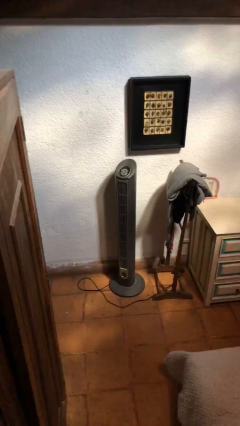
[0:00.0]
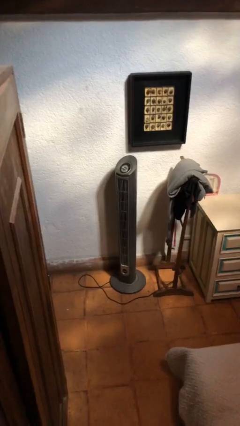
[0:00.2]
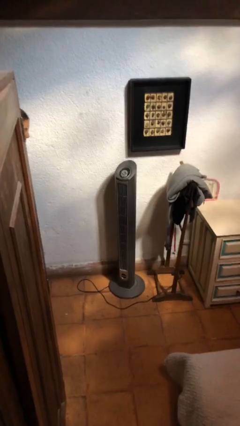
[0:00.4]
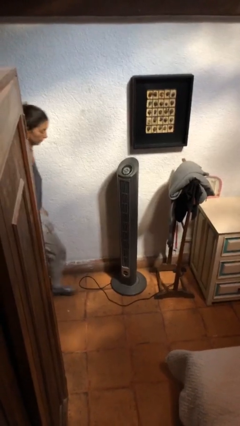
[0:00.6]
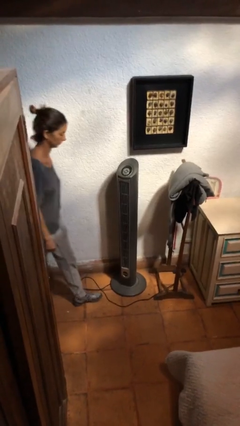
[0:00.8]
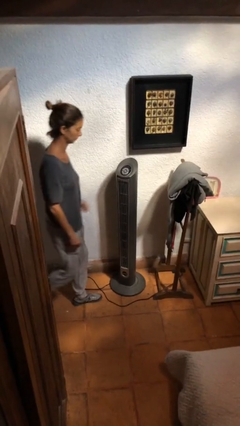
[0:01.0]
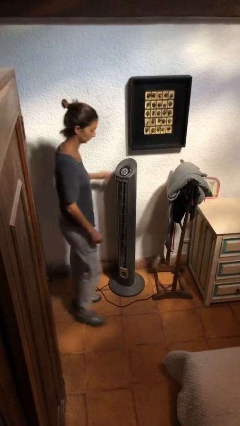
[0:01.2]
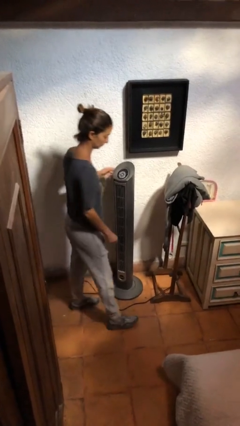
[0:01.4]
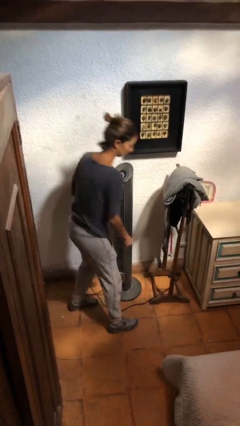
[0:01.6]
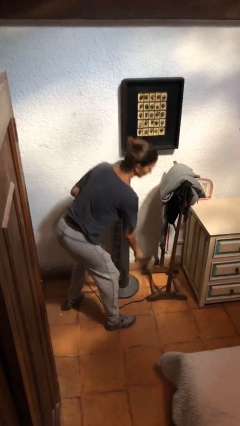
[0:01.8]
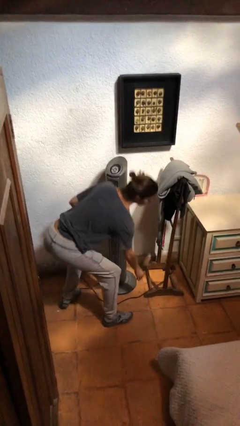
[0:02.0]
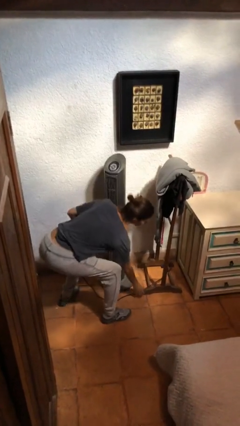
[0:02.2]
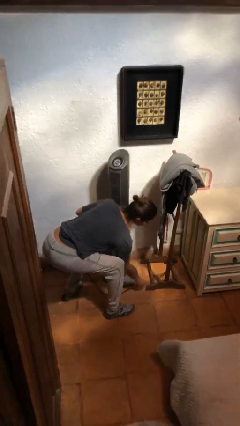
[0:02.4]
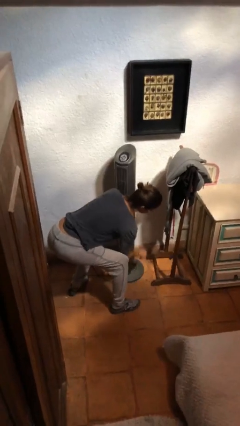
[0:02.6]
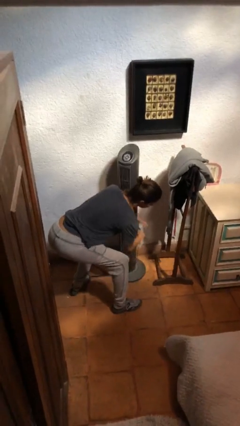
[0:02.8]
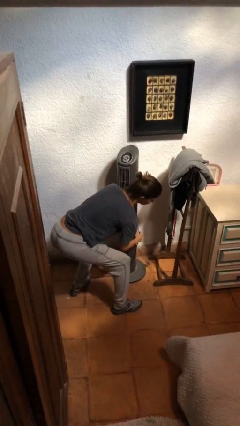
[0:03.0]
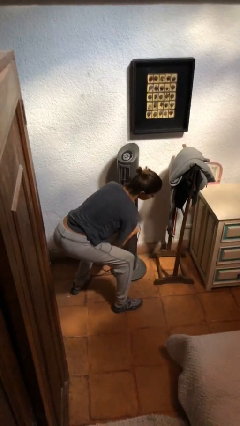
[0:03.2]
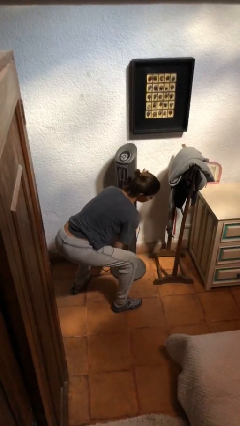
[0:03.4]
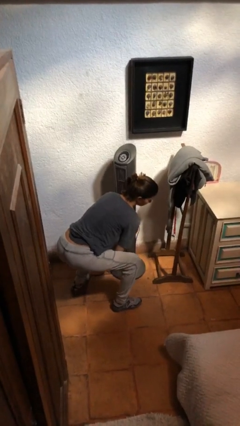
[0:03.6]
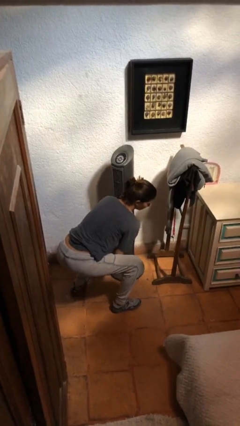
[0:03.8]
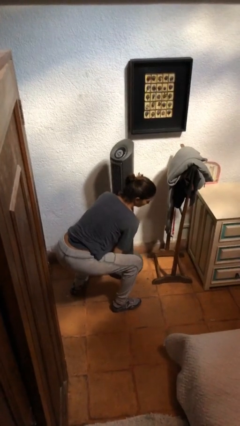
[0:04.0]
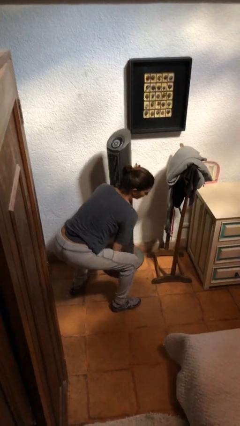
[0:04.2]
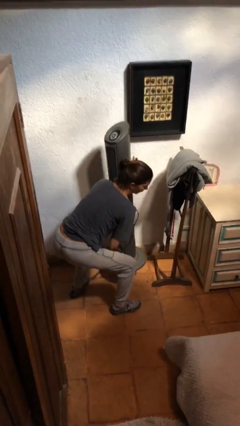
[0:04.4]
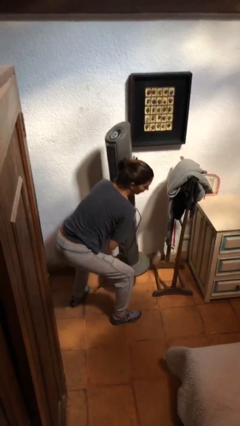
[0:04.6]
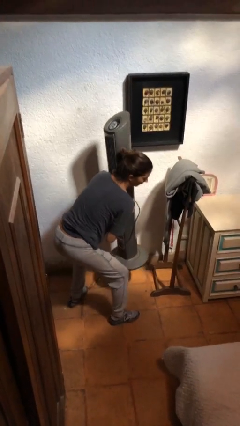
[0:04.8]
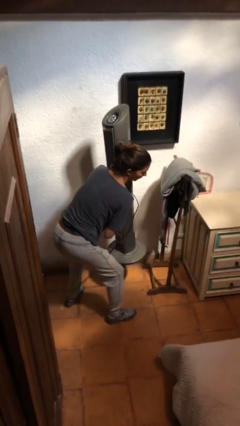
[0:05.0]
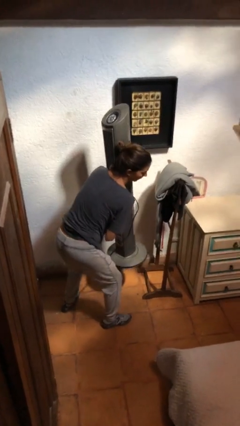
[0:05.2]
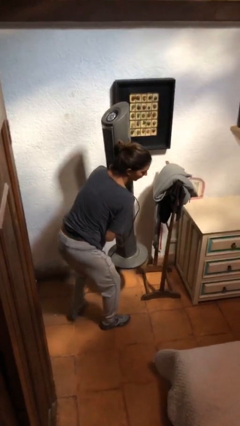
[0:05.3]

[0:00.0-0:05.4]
person picks up object from floor

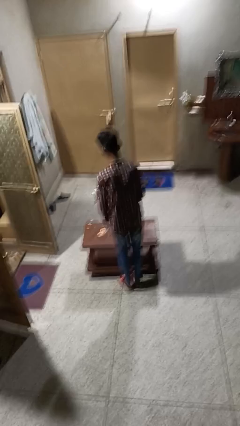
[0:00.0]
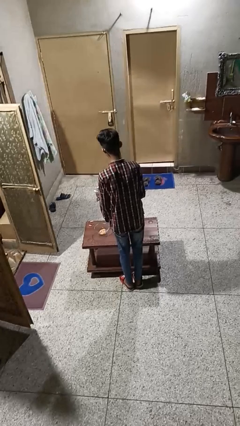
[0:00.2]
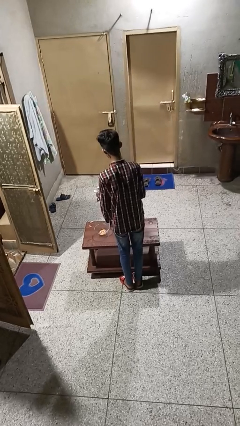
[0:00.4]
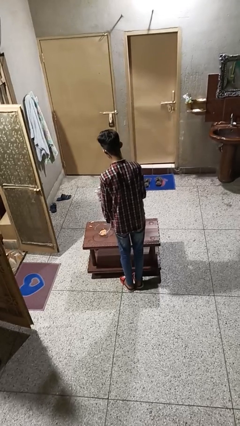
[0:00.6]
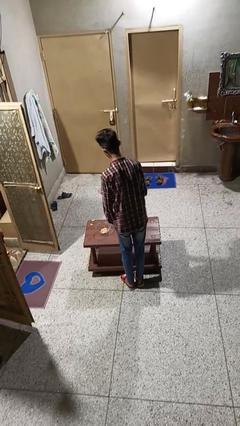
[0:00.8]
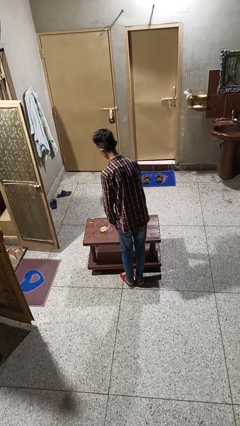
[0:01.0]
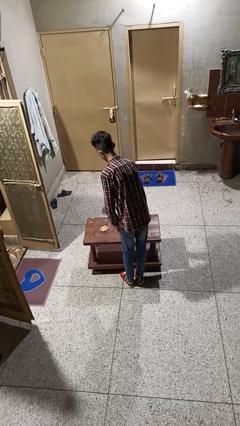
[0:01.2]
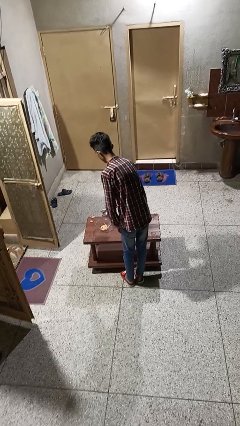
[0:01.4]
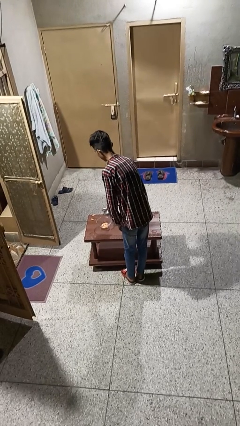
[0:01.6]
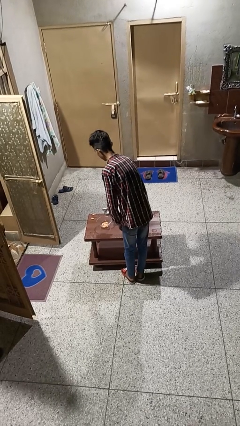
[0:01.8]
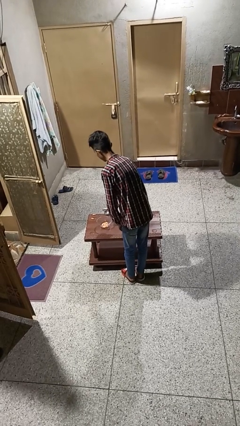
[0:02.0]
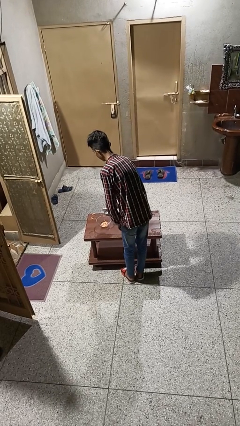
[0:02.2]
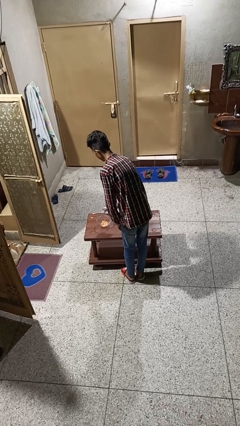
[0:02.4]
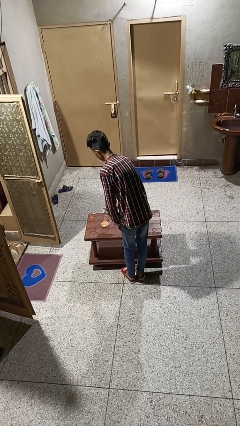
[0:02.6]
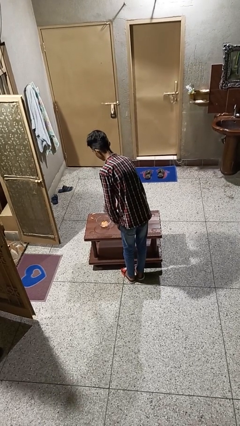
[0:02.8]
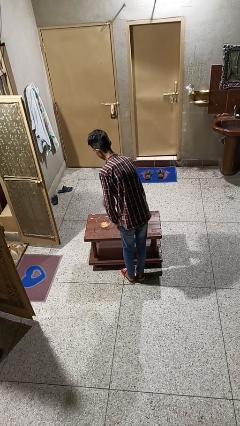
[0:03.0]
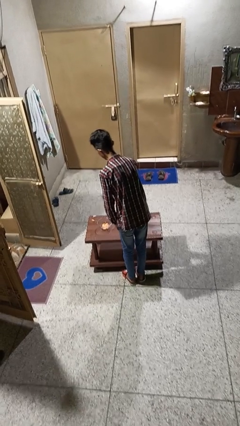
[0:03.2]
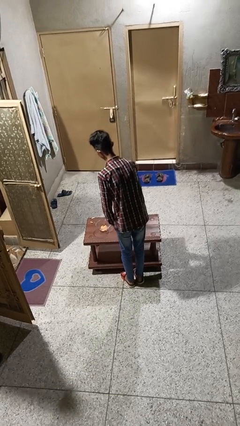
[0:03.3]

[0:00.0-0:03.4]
person pours into bowl

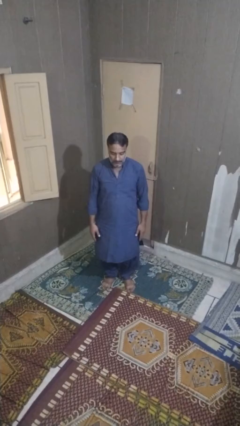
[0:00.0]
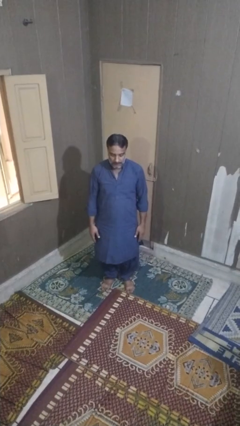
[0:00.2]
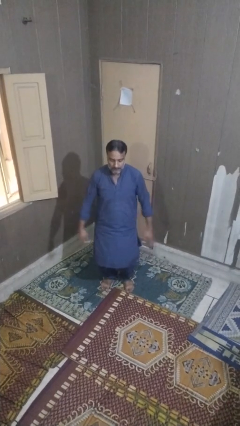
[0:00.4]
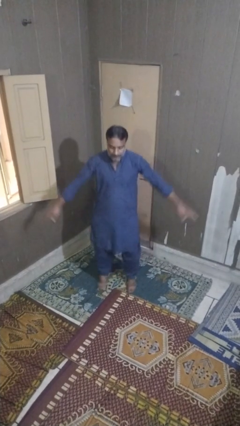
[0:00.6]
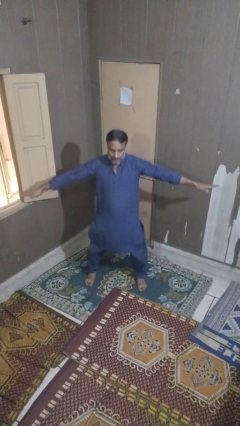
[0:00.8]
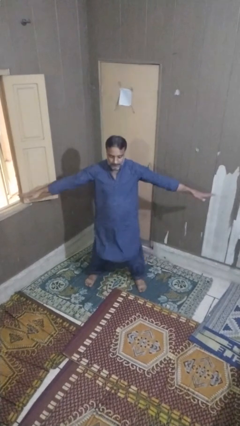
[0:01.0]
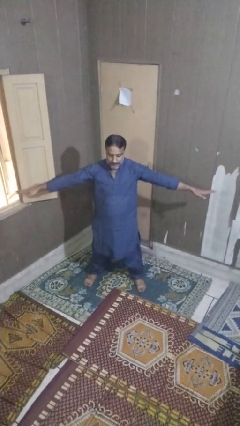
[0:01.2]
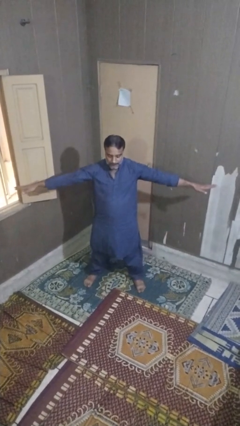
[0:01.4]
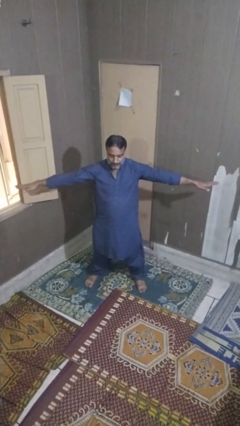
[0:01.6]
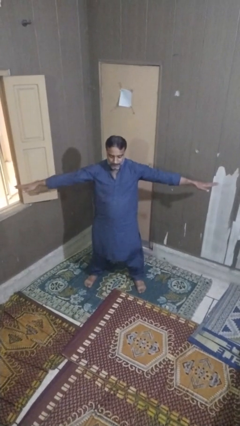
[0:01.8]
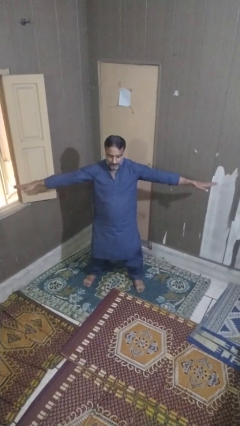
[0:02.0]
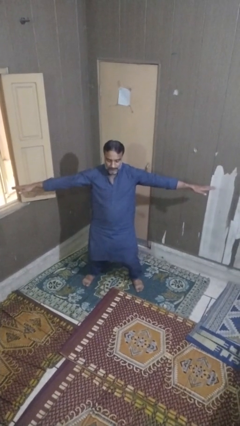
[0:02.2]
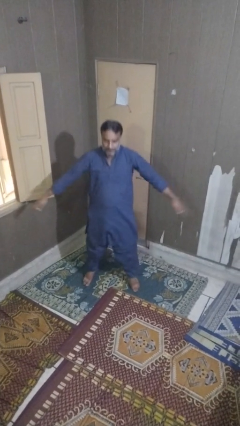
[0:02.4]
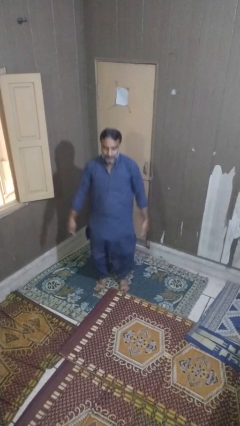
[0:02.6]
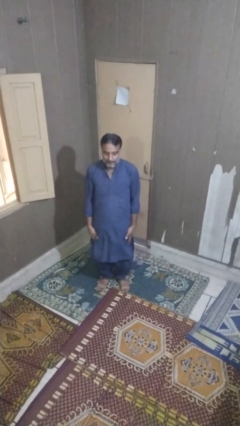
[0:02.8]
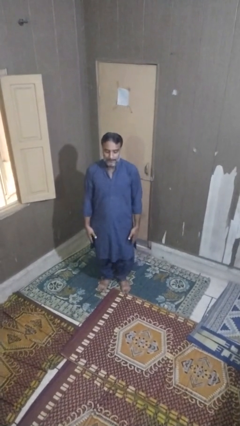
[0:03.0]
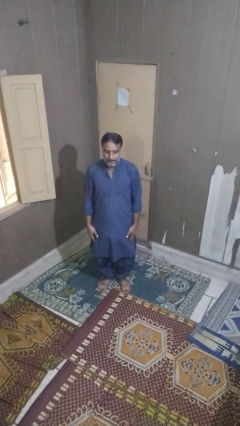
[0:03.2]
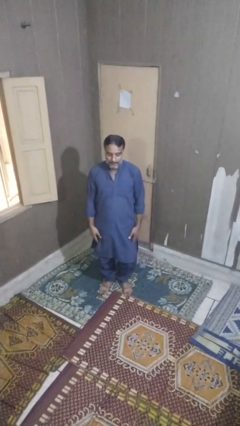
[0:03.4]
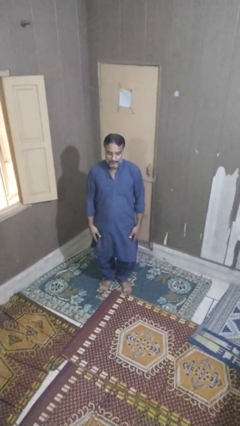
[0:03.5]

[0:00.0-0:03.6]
person exercises with jumping jacks

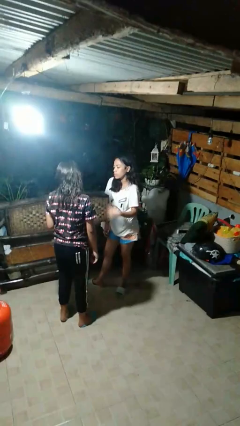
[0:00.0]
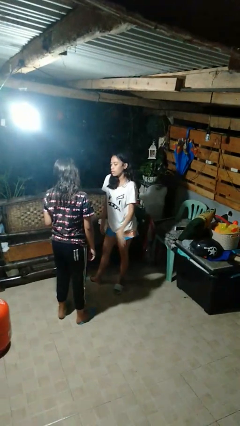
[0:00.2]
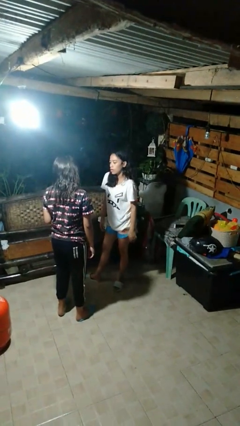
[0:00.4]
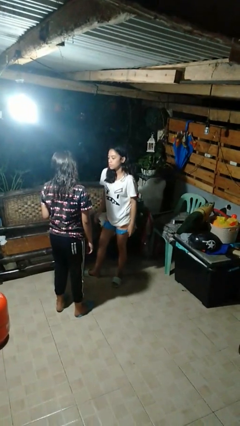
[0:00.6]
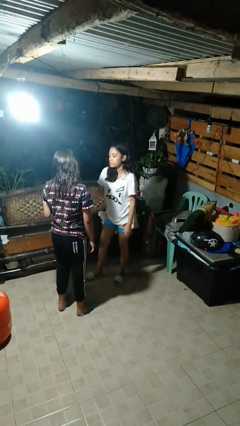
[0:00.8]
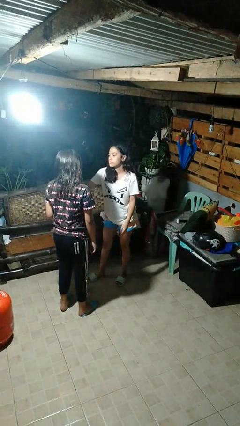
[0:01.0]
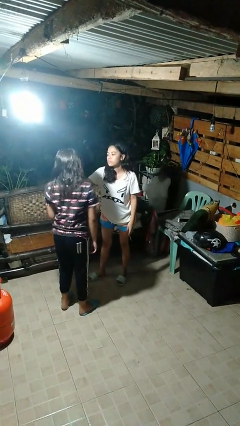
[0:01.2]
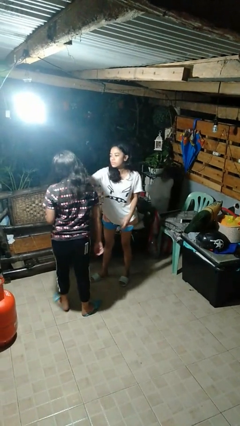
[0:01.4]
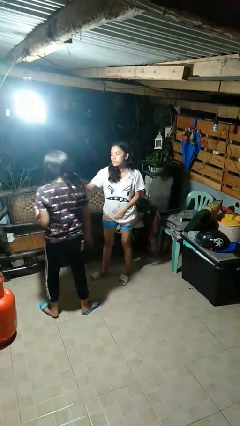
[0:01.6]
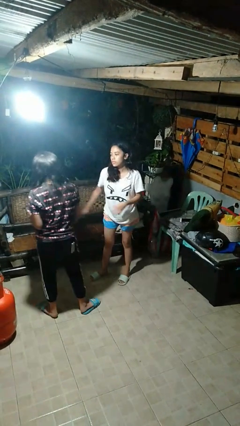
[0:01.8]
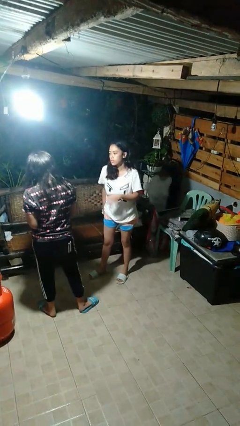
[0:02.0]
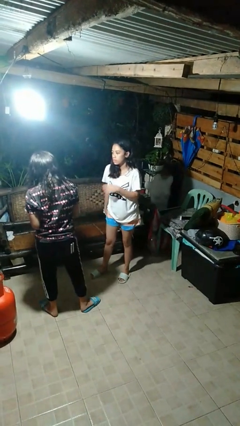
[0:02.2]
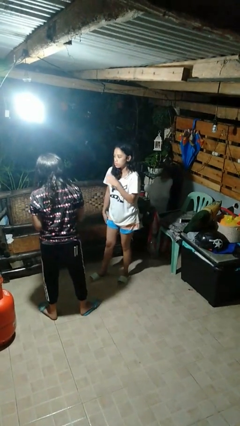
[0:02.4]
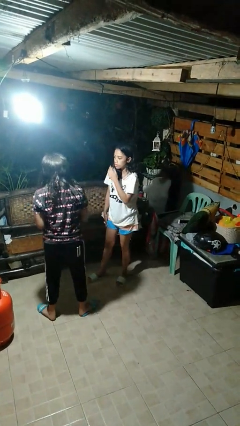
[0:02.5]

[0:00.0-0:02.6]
person shoves person

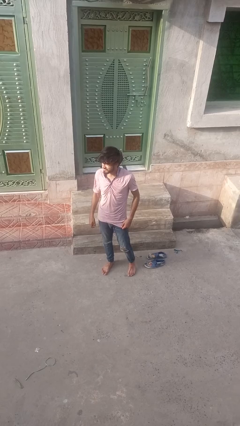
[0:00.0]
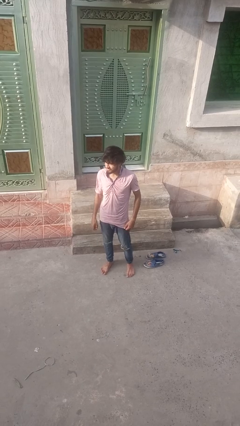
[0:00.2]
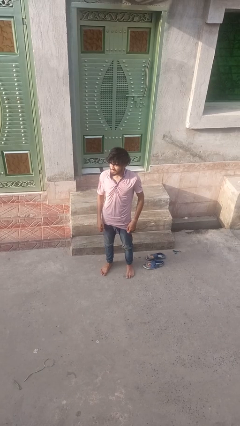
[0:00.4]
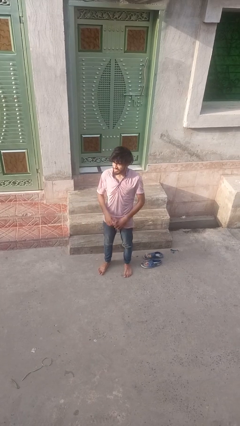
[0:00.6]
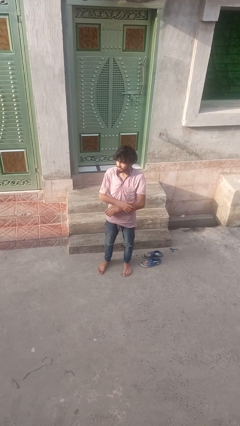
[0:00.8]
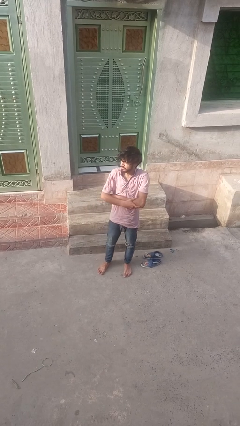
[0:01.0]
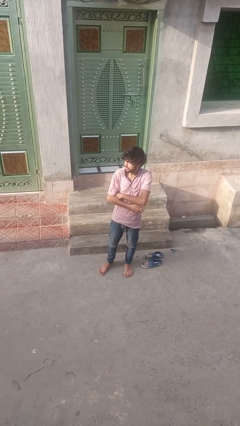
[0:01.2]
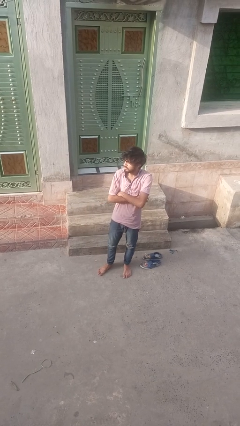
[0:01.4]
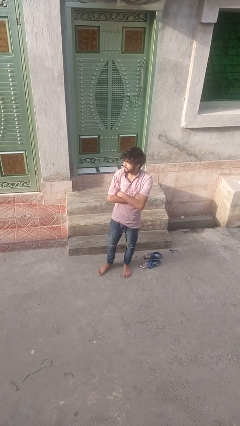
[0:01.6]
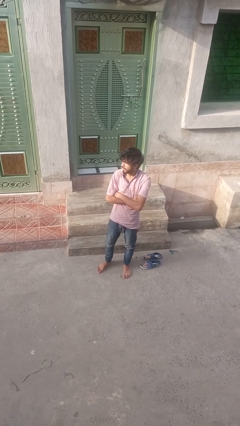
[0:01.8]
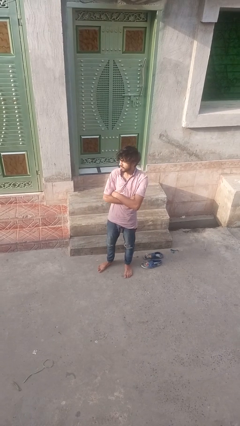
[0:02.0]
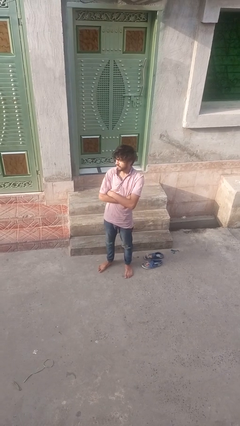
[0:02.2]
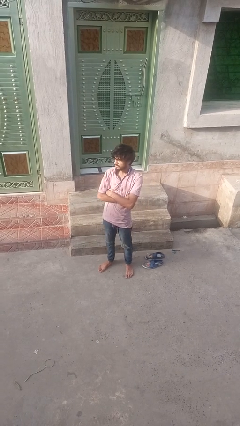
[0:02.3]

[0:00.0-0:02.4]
person crosses arms

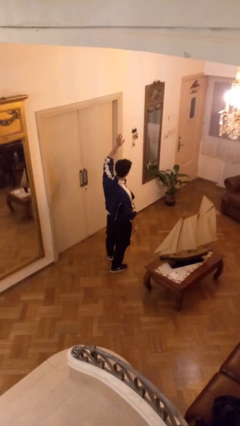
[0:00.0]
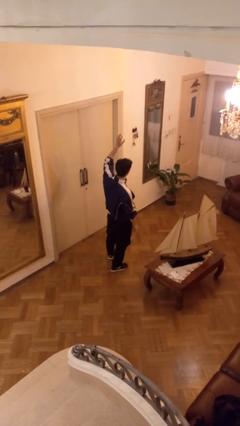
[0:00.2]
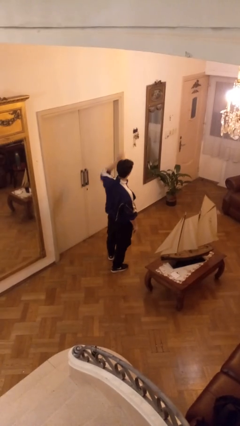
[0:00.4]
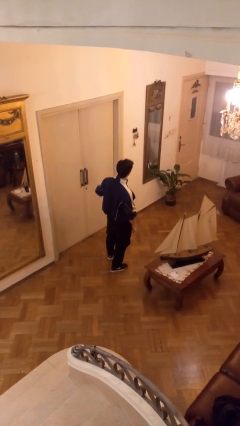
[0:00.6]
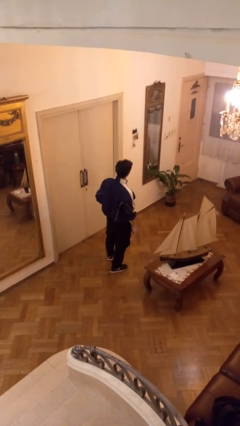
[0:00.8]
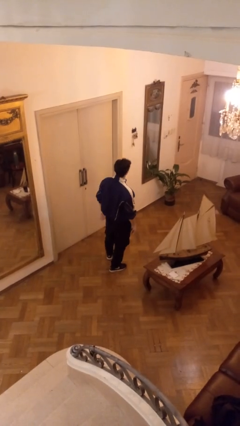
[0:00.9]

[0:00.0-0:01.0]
person gestures lower hand
